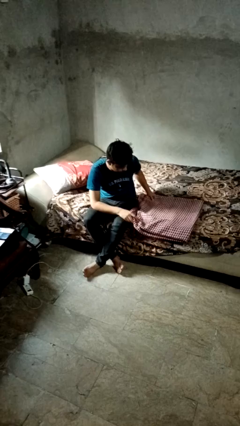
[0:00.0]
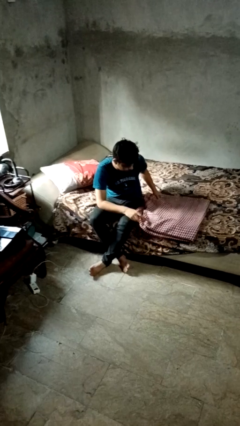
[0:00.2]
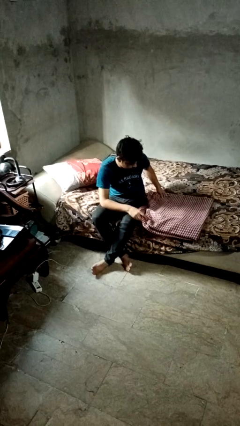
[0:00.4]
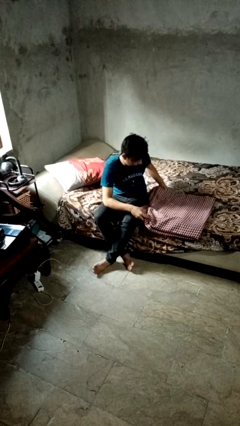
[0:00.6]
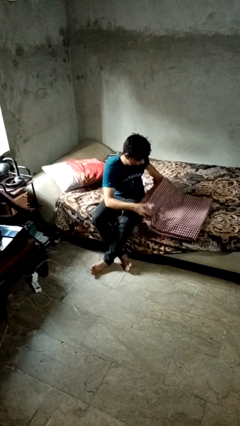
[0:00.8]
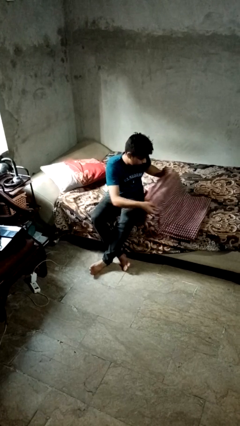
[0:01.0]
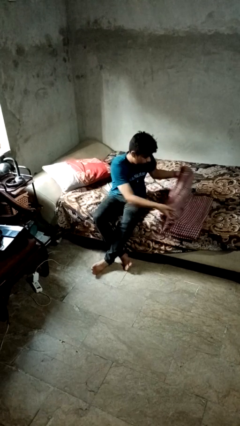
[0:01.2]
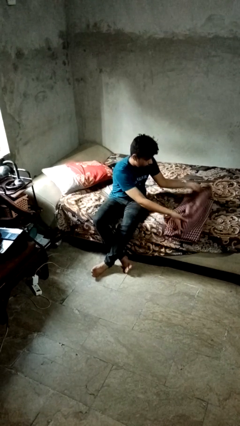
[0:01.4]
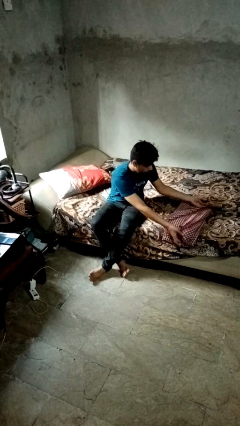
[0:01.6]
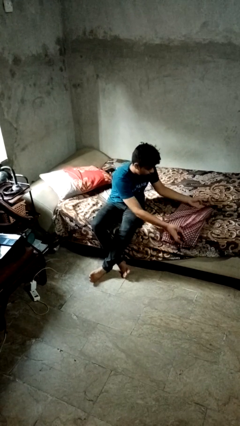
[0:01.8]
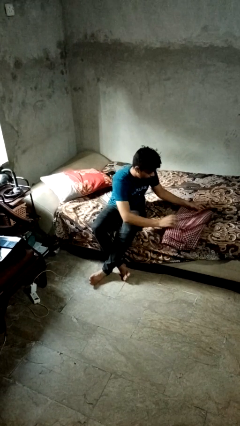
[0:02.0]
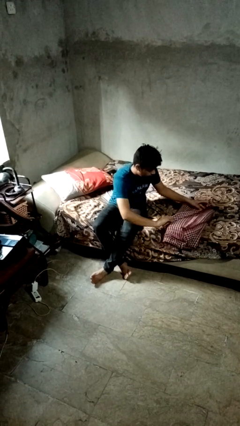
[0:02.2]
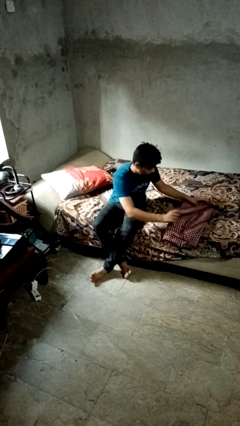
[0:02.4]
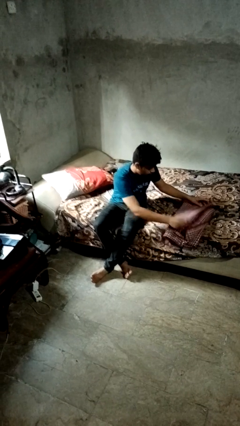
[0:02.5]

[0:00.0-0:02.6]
person folds blanket

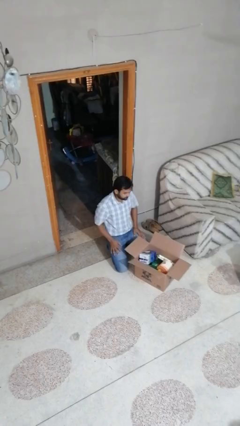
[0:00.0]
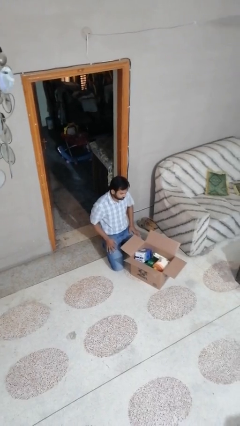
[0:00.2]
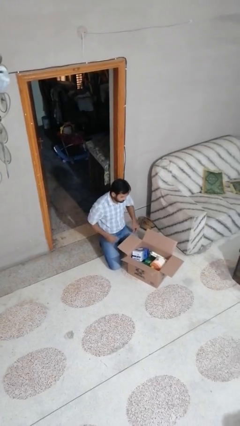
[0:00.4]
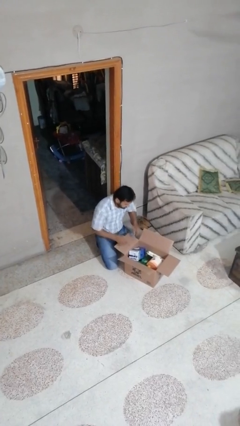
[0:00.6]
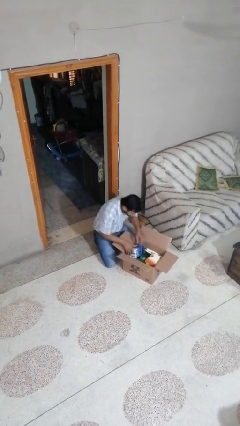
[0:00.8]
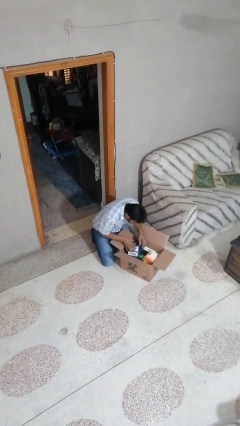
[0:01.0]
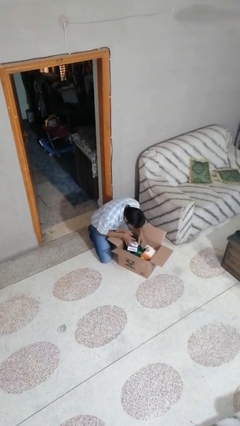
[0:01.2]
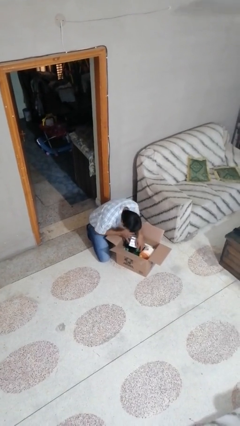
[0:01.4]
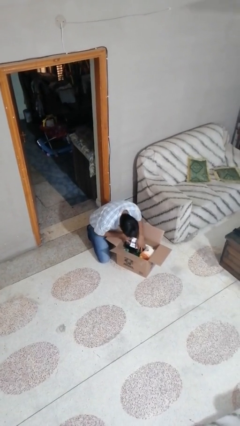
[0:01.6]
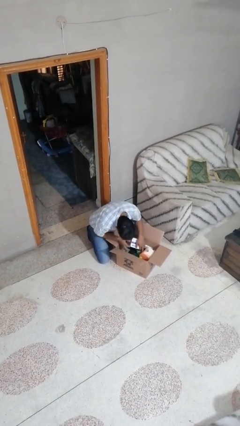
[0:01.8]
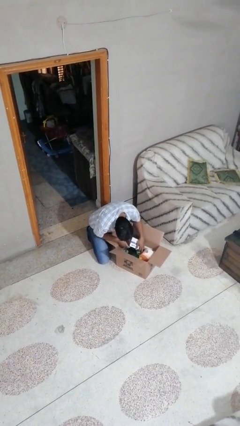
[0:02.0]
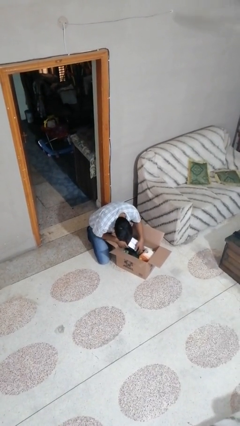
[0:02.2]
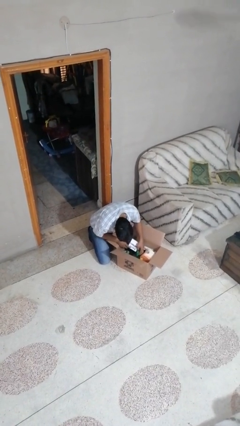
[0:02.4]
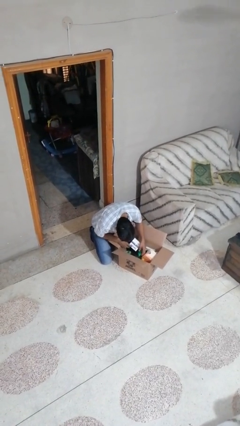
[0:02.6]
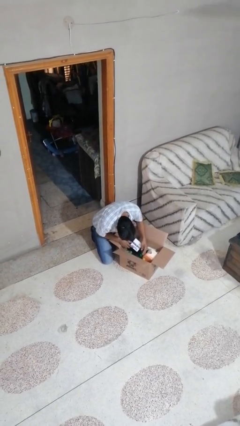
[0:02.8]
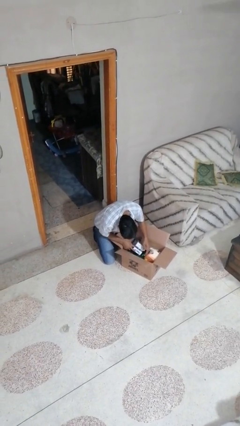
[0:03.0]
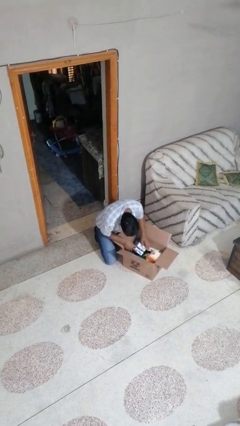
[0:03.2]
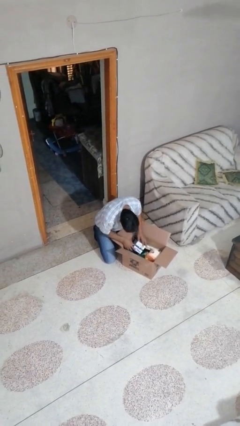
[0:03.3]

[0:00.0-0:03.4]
person searches in box

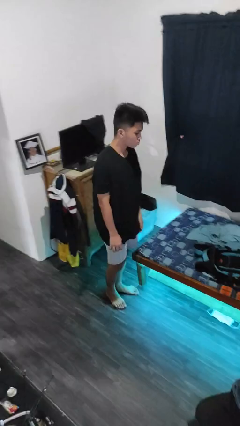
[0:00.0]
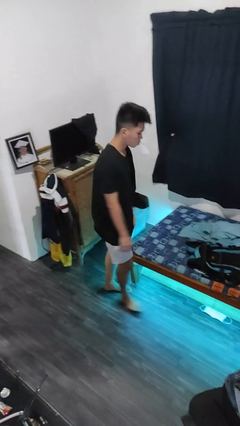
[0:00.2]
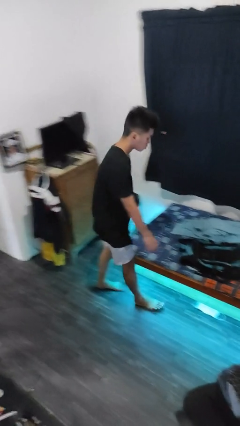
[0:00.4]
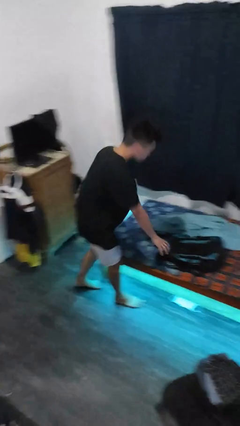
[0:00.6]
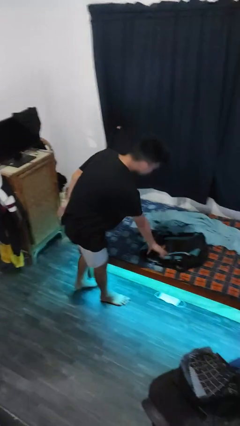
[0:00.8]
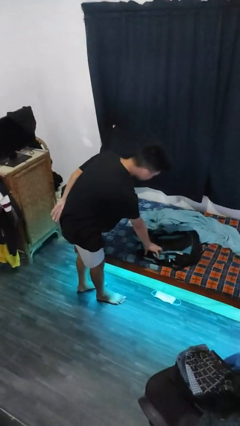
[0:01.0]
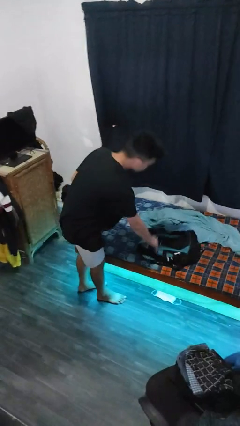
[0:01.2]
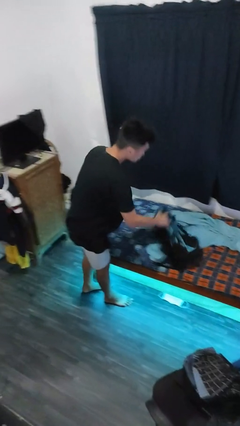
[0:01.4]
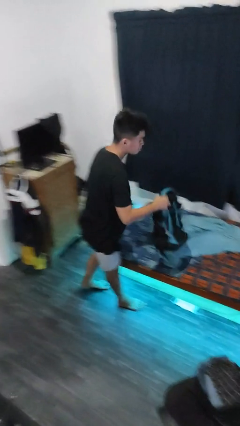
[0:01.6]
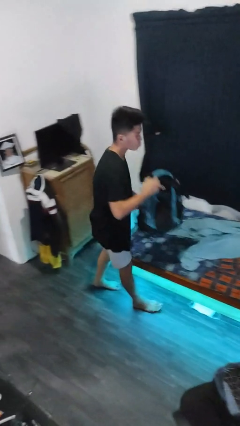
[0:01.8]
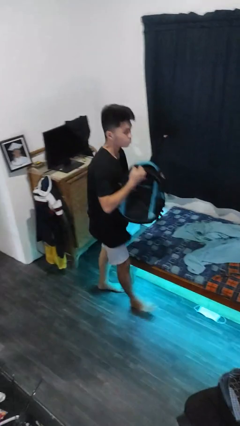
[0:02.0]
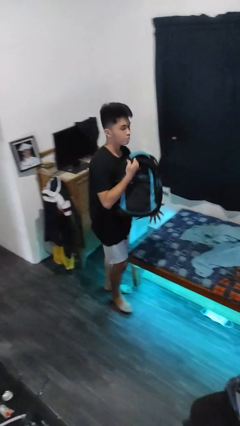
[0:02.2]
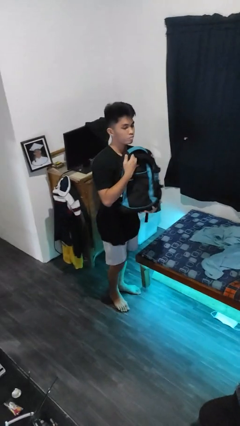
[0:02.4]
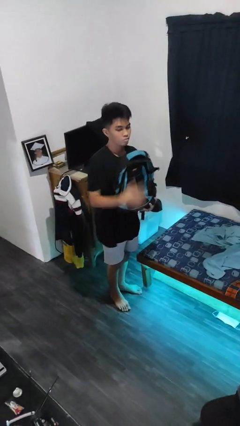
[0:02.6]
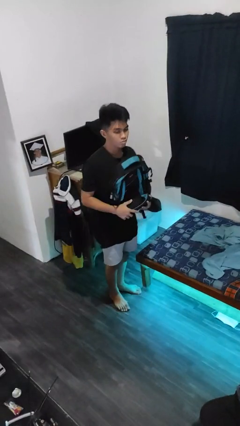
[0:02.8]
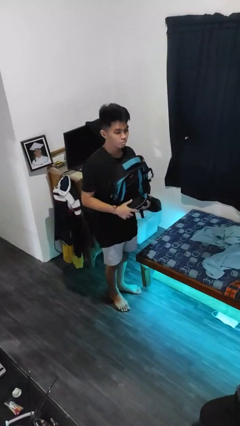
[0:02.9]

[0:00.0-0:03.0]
person picks up object from bed

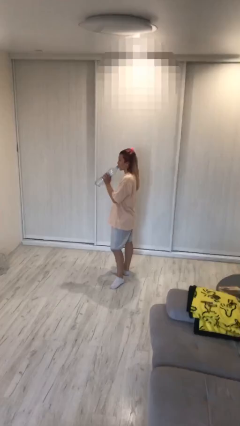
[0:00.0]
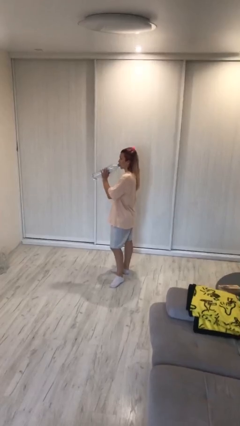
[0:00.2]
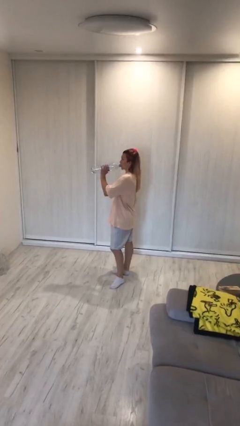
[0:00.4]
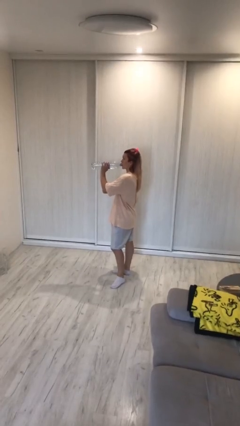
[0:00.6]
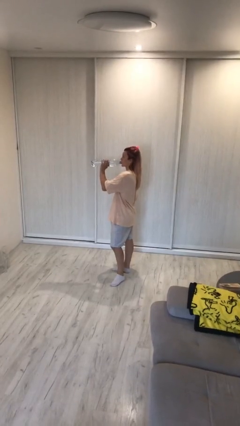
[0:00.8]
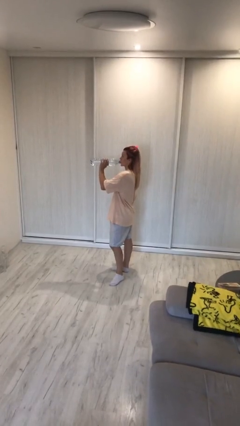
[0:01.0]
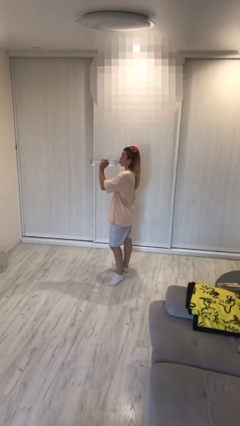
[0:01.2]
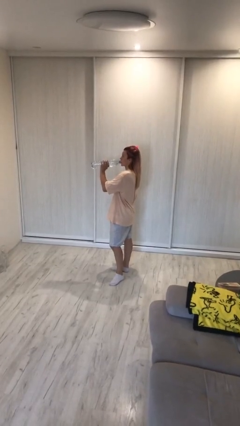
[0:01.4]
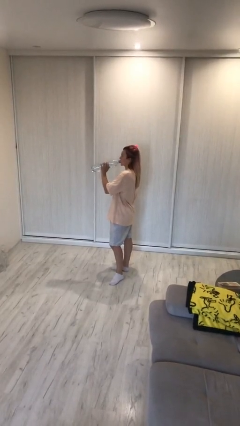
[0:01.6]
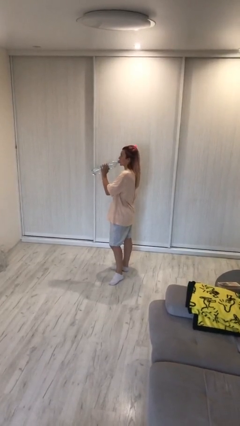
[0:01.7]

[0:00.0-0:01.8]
person drinks from bottle

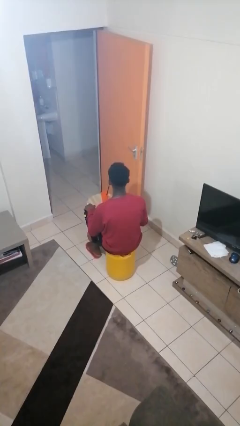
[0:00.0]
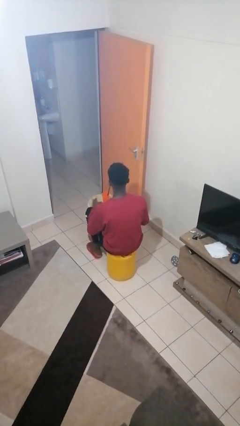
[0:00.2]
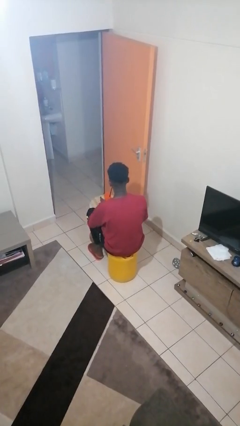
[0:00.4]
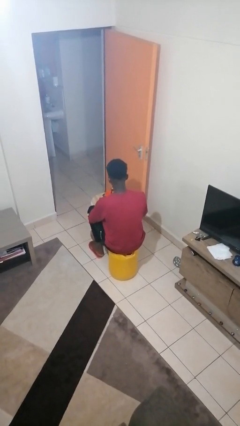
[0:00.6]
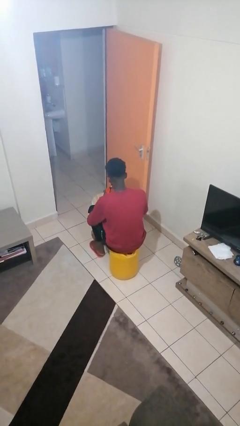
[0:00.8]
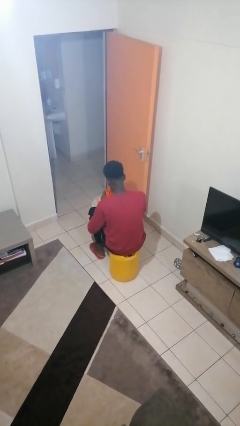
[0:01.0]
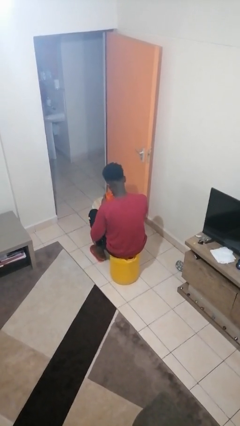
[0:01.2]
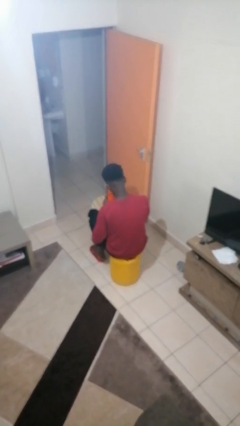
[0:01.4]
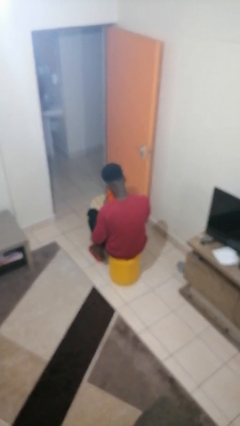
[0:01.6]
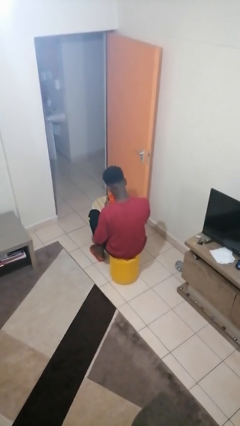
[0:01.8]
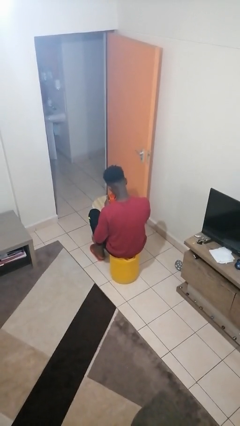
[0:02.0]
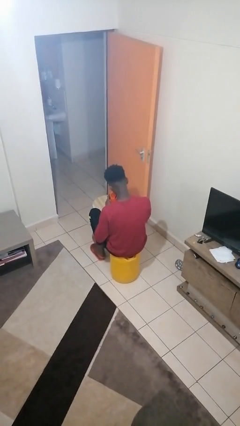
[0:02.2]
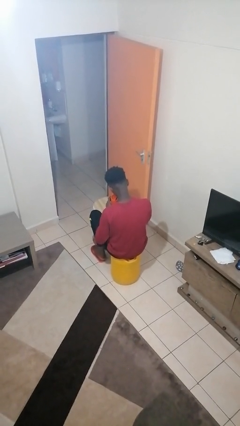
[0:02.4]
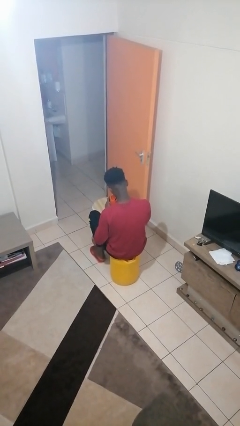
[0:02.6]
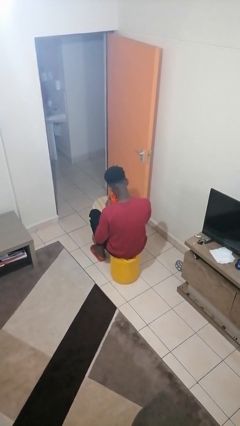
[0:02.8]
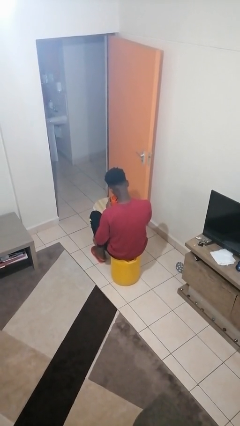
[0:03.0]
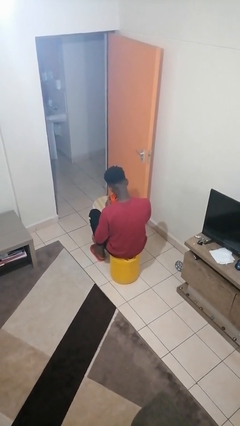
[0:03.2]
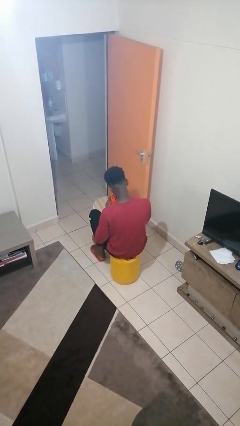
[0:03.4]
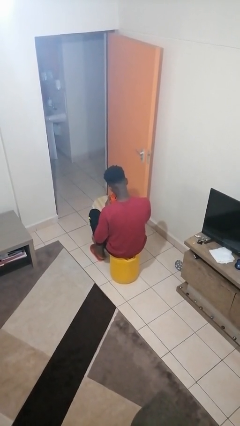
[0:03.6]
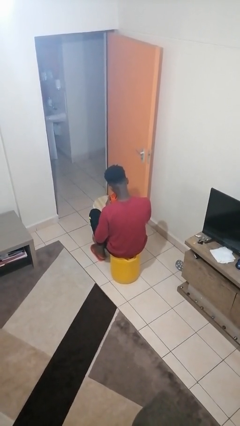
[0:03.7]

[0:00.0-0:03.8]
person drinks from straw

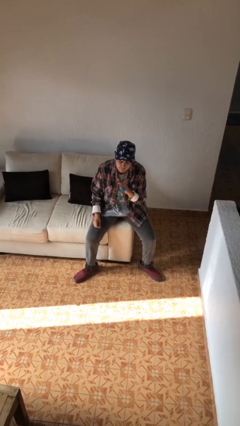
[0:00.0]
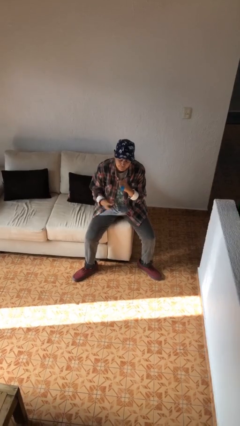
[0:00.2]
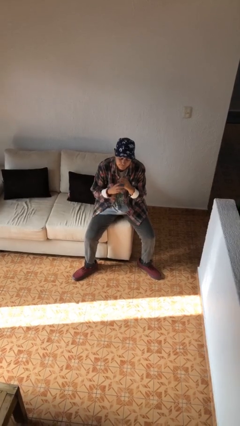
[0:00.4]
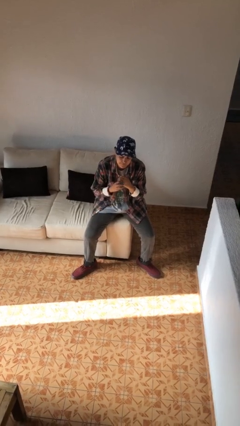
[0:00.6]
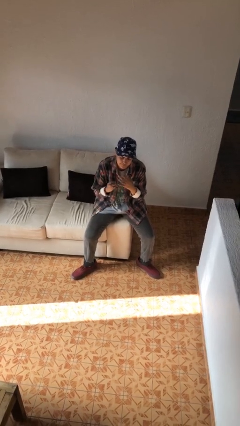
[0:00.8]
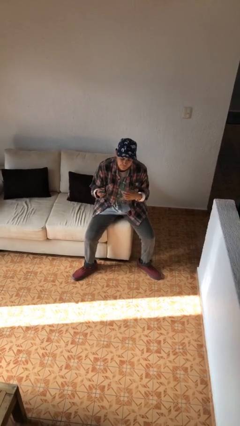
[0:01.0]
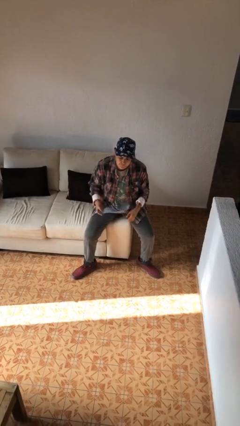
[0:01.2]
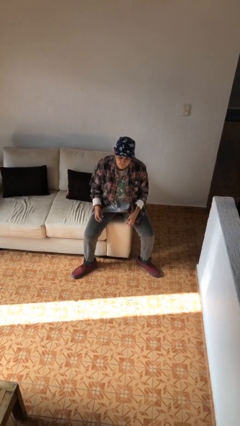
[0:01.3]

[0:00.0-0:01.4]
person takes off ring

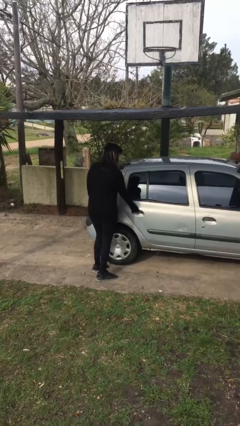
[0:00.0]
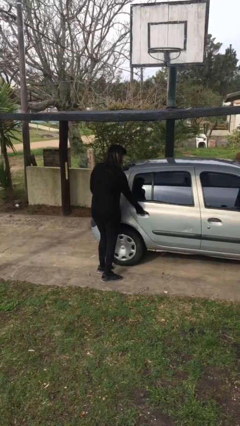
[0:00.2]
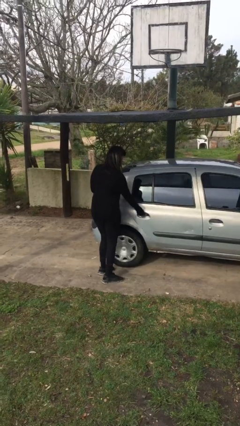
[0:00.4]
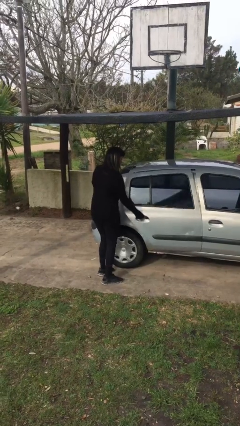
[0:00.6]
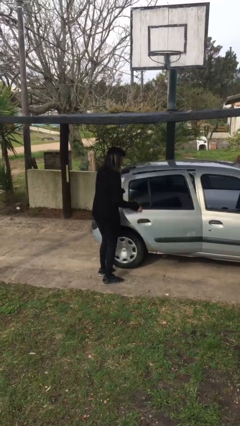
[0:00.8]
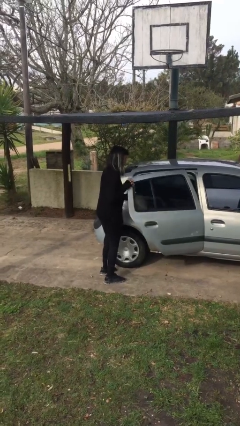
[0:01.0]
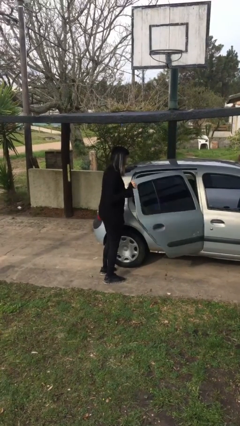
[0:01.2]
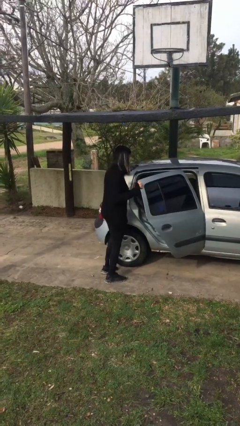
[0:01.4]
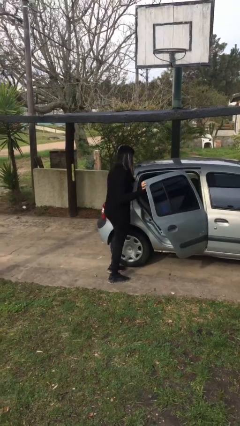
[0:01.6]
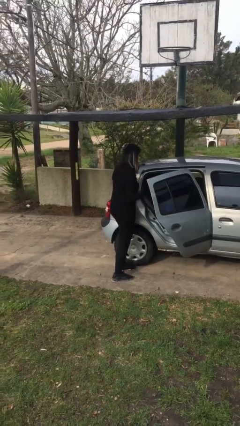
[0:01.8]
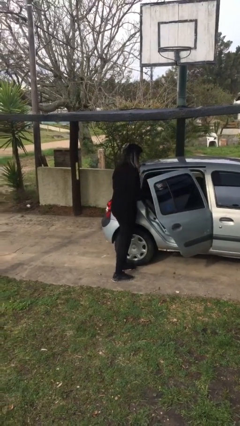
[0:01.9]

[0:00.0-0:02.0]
person opens car door
